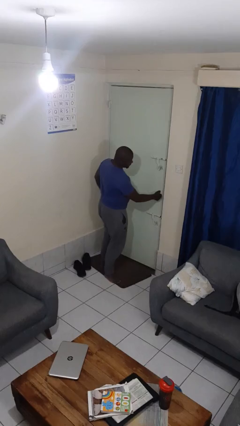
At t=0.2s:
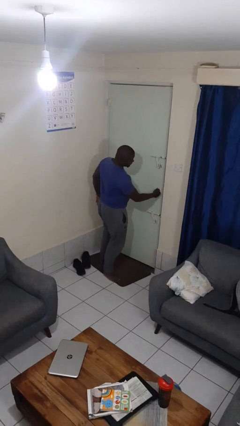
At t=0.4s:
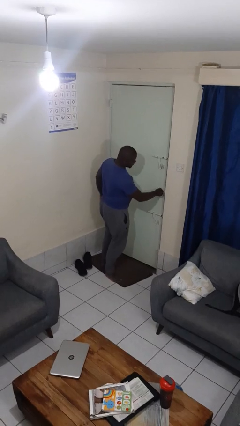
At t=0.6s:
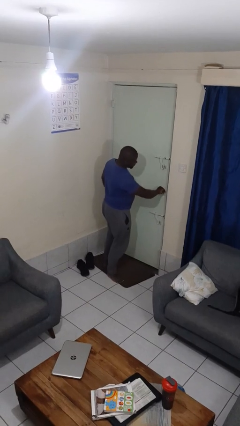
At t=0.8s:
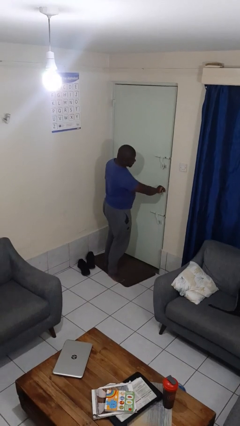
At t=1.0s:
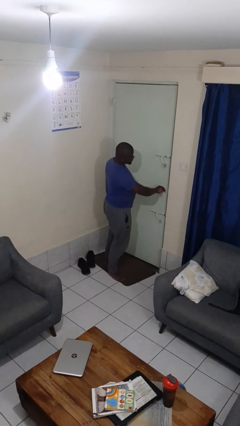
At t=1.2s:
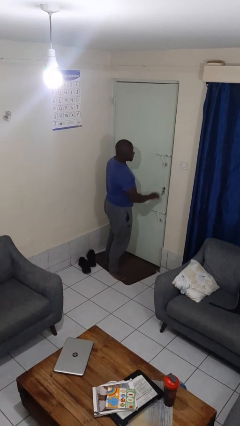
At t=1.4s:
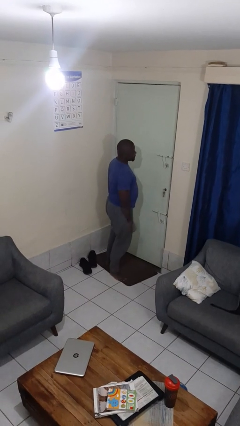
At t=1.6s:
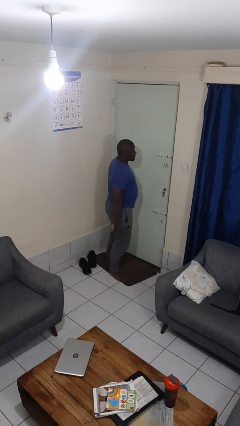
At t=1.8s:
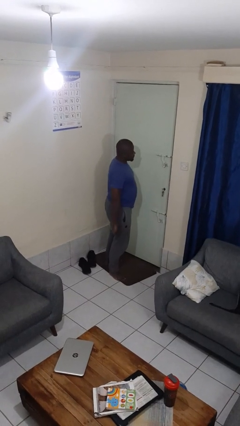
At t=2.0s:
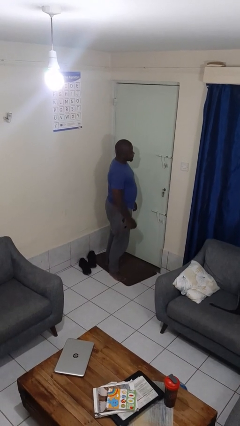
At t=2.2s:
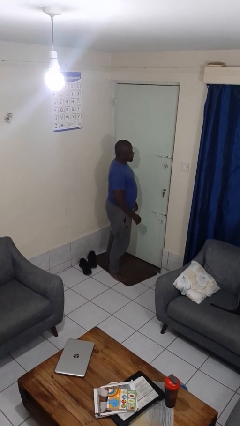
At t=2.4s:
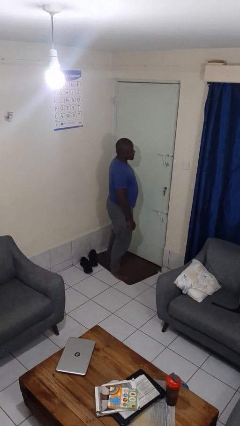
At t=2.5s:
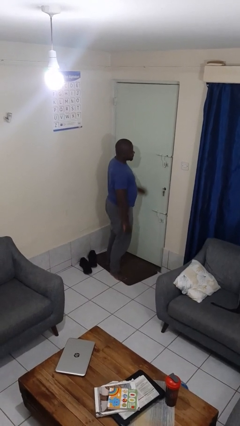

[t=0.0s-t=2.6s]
person unlocks door with keys

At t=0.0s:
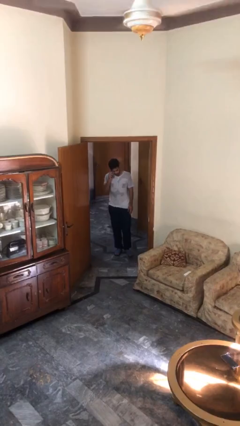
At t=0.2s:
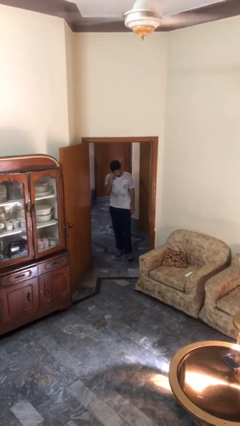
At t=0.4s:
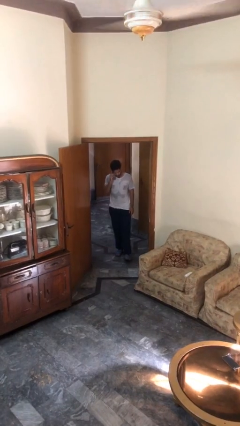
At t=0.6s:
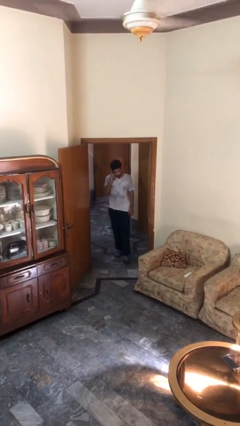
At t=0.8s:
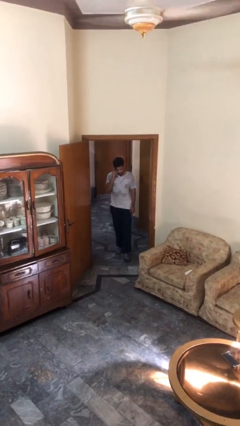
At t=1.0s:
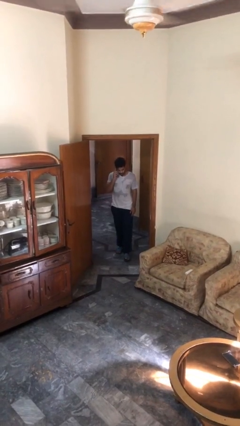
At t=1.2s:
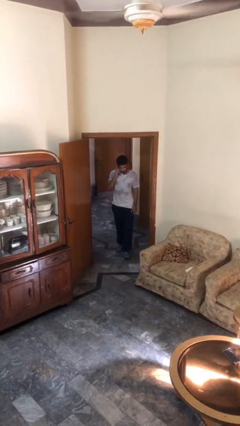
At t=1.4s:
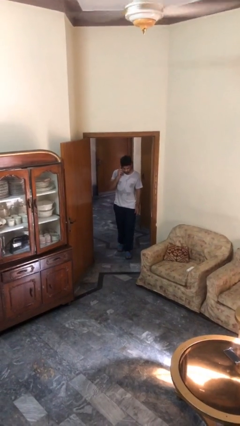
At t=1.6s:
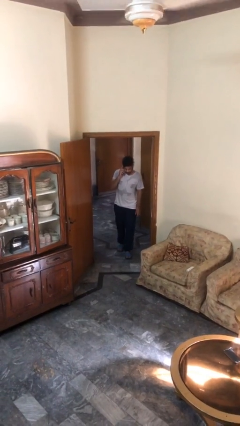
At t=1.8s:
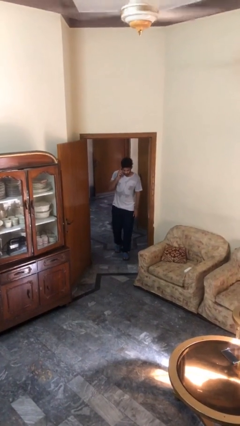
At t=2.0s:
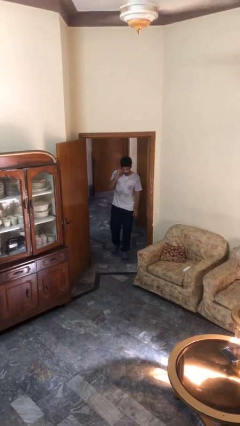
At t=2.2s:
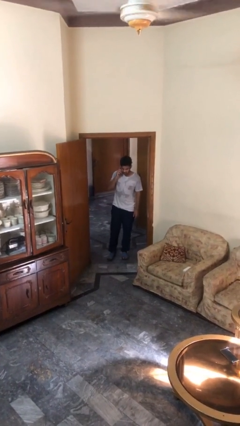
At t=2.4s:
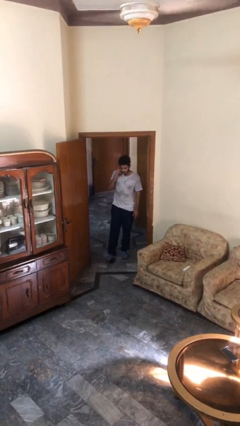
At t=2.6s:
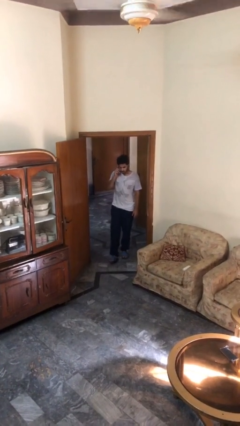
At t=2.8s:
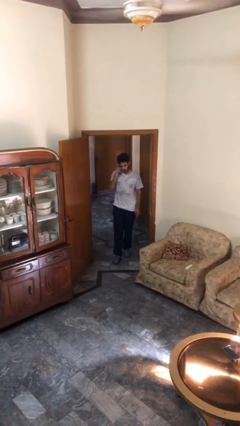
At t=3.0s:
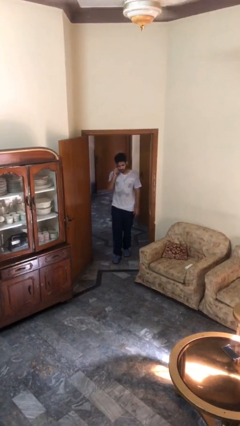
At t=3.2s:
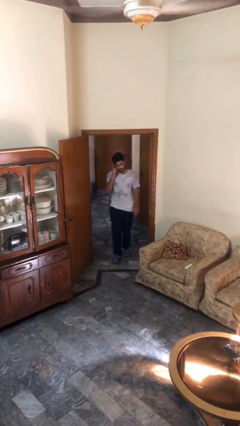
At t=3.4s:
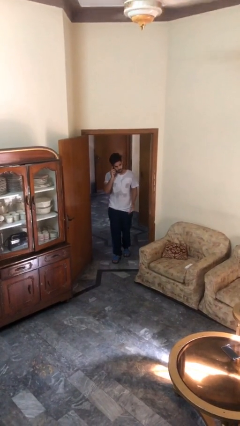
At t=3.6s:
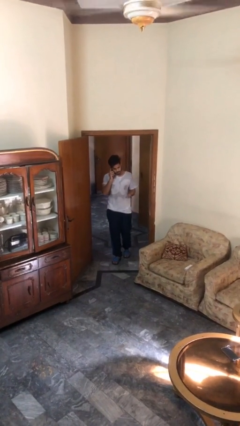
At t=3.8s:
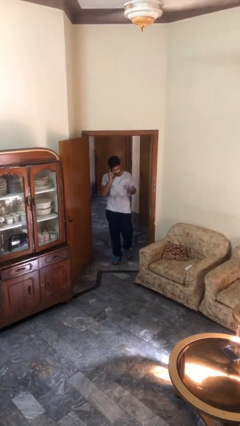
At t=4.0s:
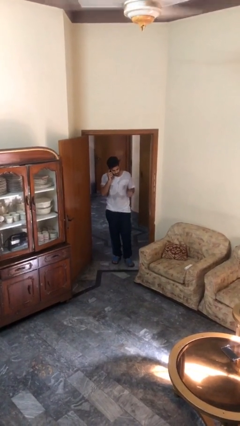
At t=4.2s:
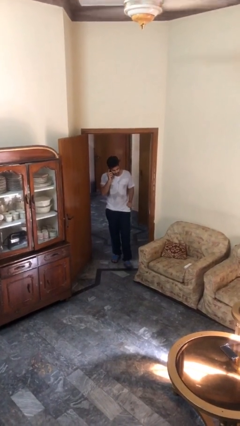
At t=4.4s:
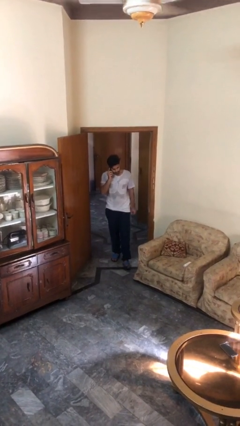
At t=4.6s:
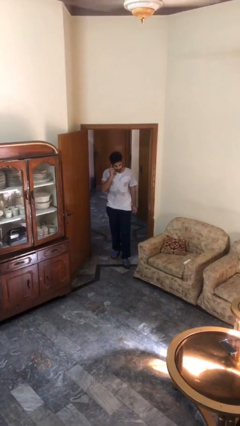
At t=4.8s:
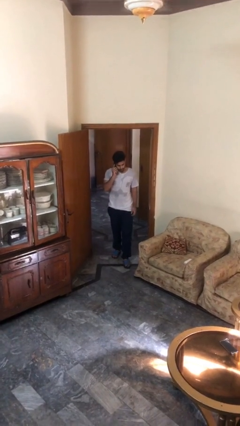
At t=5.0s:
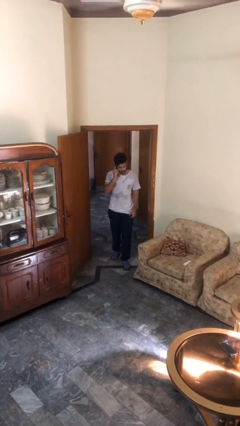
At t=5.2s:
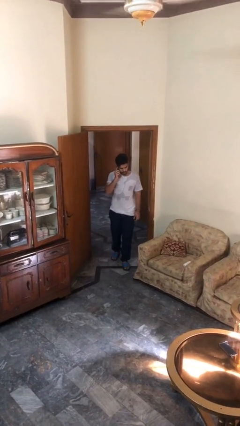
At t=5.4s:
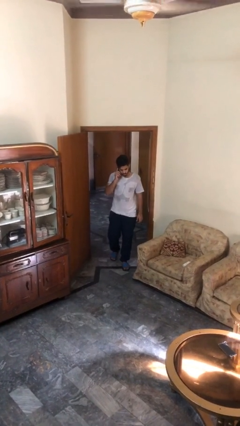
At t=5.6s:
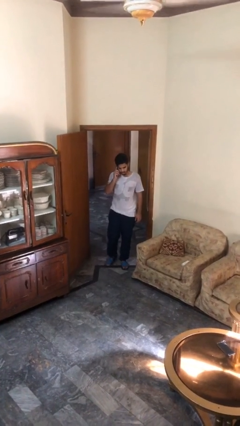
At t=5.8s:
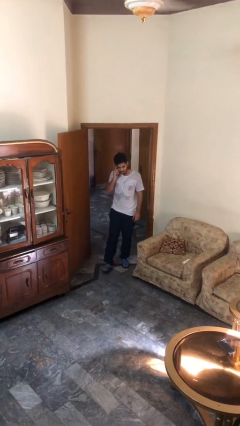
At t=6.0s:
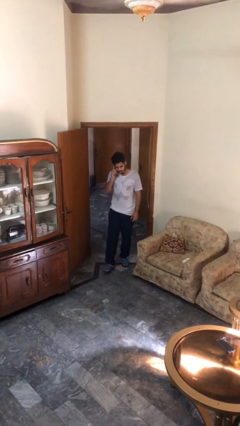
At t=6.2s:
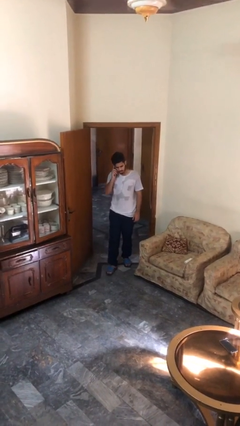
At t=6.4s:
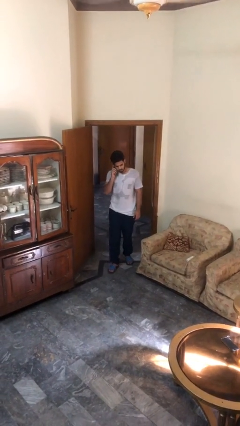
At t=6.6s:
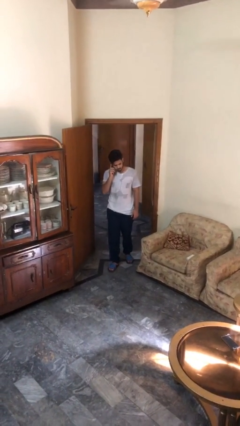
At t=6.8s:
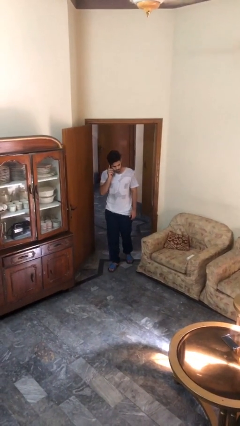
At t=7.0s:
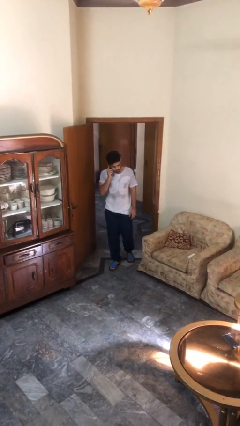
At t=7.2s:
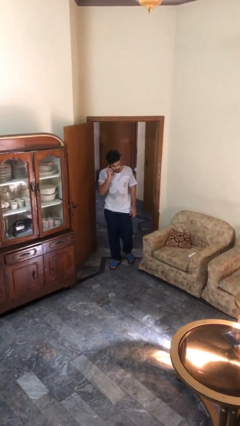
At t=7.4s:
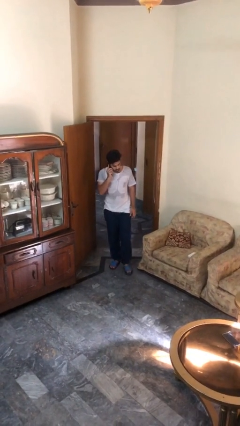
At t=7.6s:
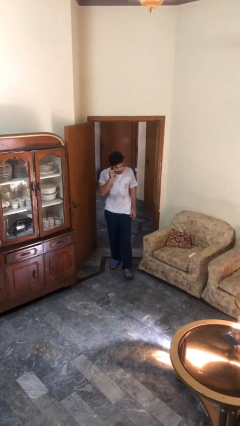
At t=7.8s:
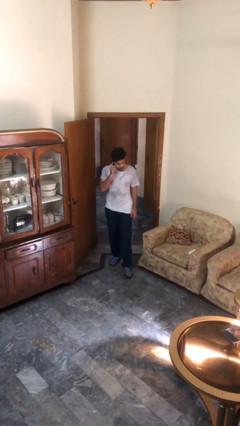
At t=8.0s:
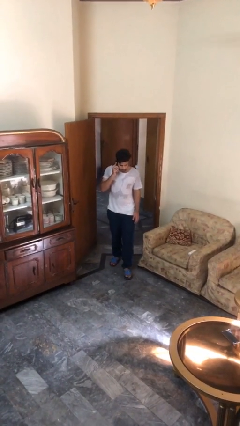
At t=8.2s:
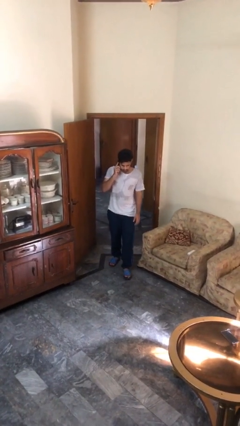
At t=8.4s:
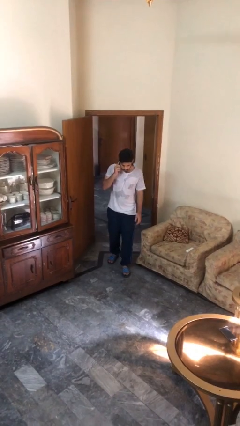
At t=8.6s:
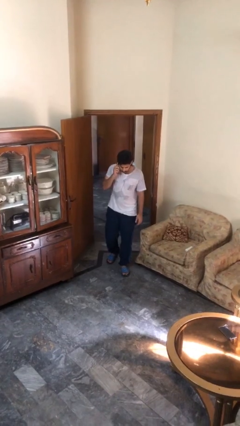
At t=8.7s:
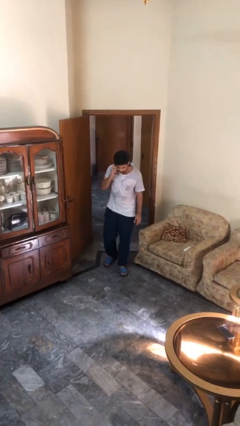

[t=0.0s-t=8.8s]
person enters scene through structure

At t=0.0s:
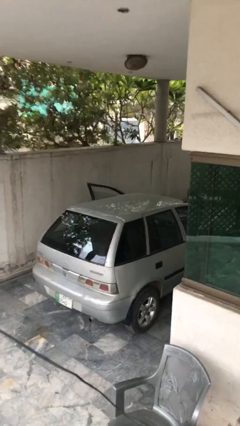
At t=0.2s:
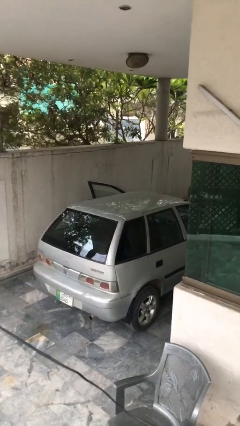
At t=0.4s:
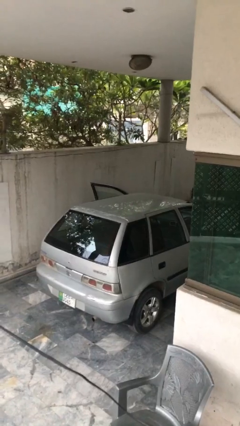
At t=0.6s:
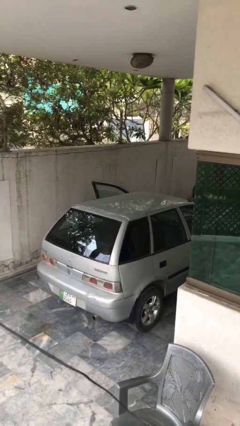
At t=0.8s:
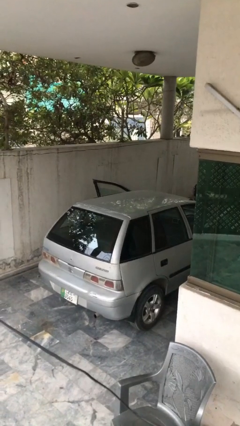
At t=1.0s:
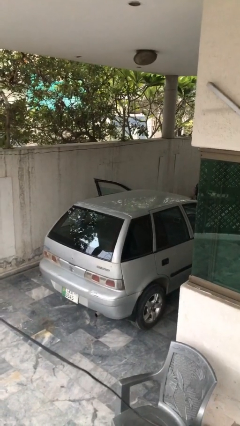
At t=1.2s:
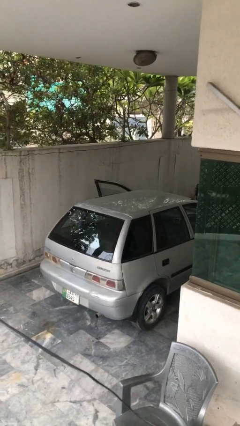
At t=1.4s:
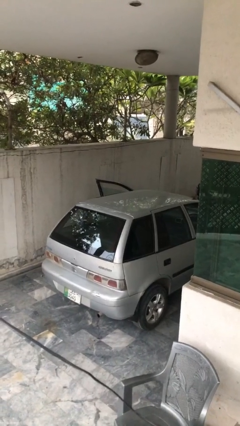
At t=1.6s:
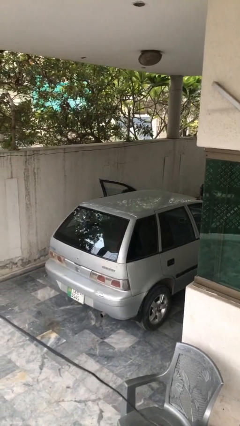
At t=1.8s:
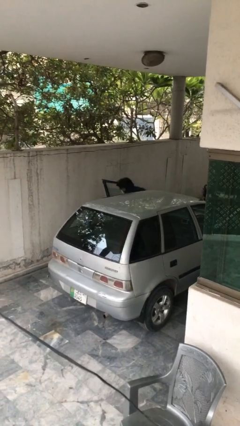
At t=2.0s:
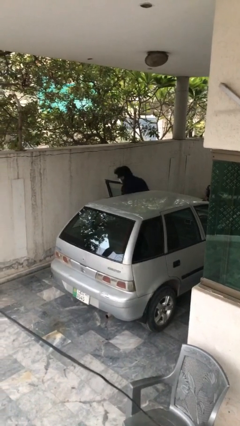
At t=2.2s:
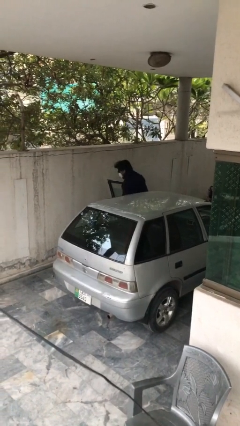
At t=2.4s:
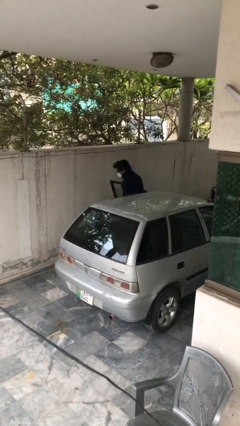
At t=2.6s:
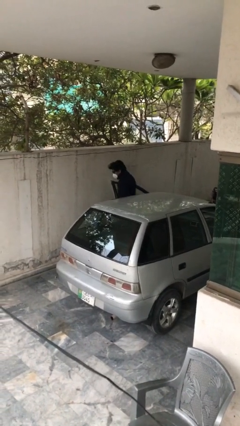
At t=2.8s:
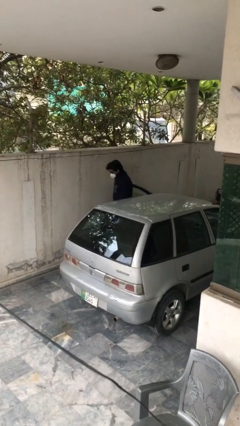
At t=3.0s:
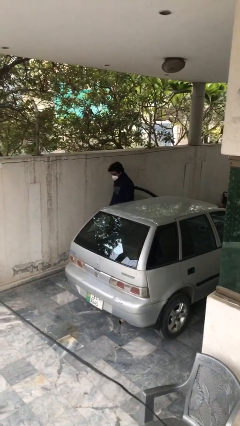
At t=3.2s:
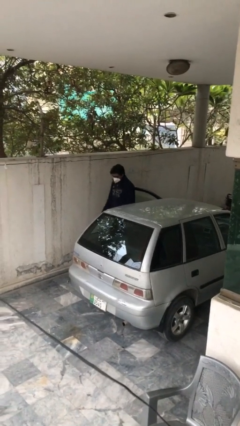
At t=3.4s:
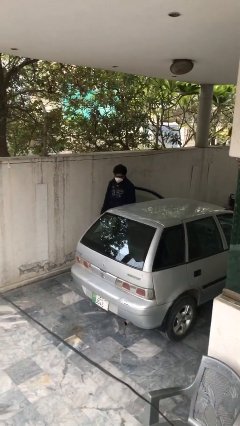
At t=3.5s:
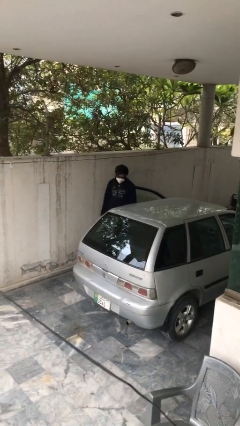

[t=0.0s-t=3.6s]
person exits car

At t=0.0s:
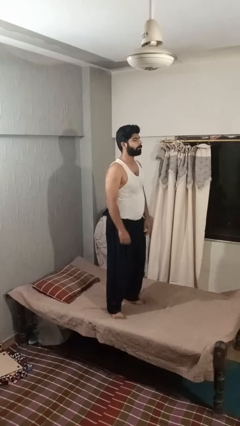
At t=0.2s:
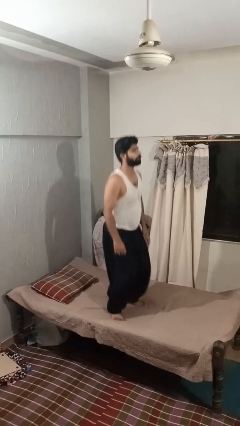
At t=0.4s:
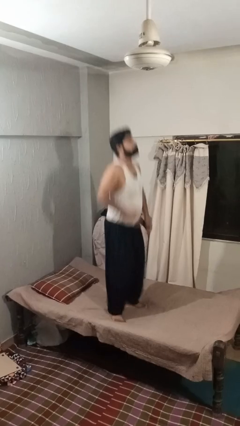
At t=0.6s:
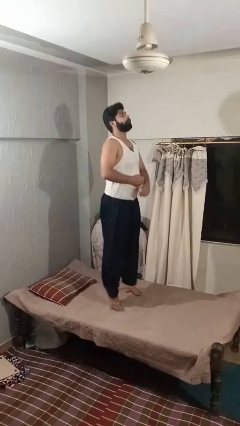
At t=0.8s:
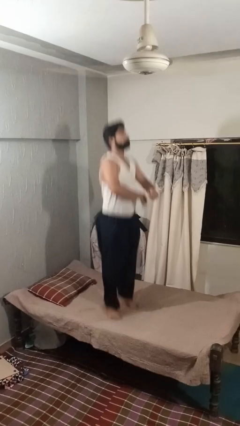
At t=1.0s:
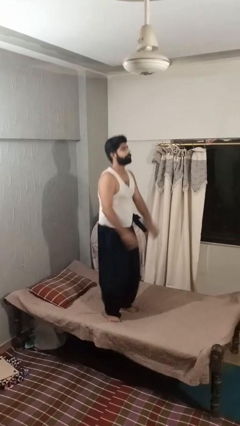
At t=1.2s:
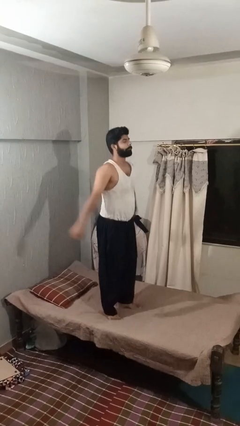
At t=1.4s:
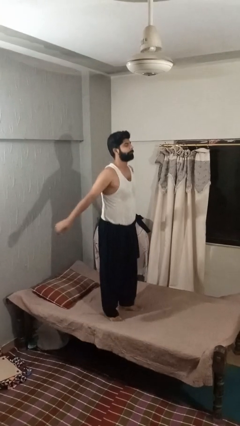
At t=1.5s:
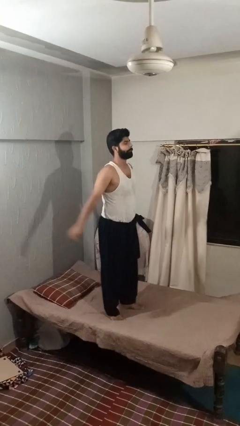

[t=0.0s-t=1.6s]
person jumps on bed

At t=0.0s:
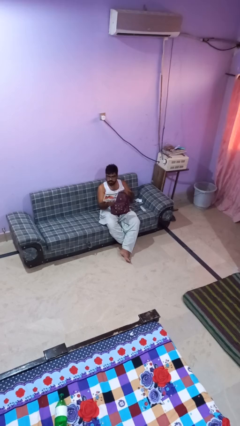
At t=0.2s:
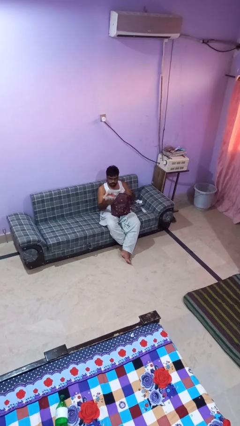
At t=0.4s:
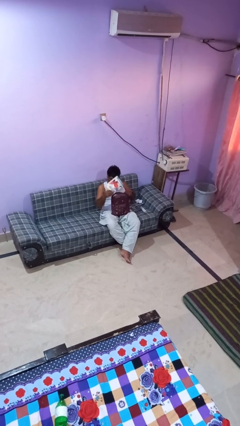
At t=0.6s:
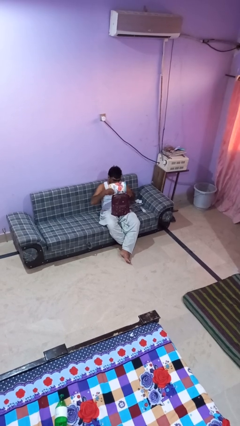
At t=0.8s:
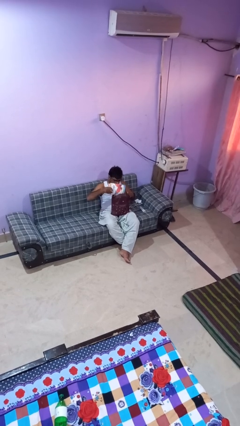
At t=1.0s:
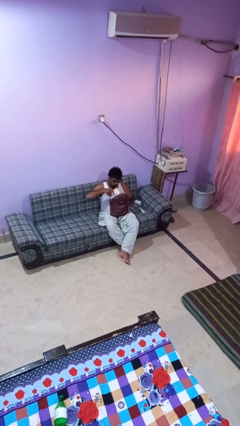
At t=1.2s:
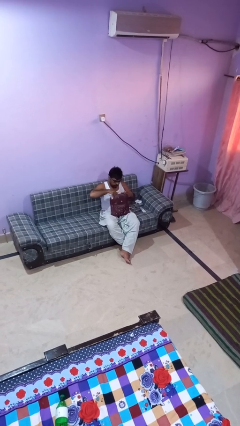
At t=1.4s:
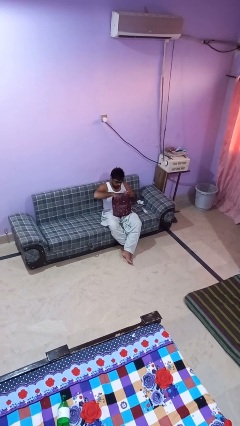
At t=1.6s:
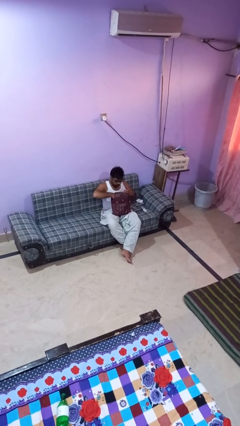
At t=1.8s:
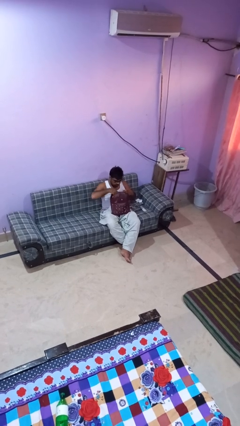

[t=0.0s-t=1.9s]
person puts object into backpack
